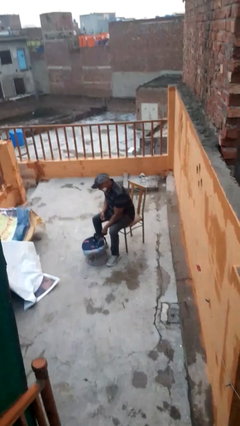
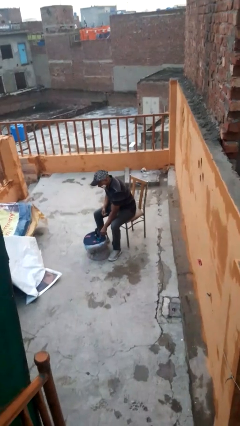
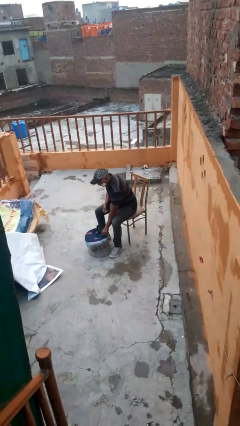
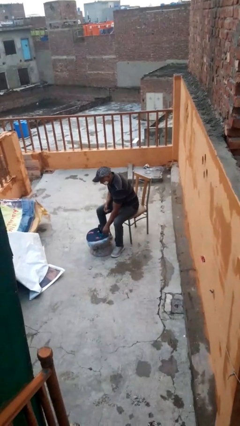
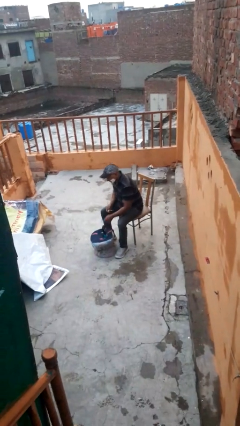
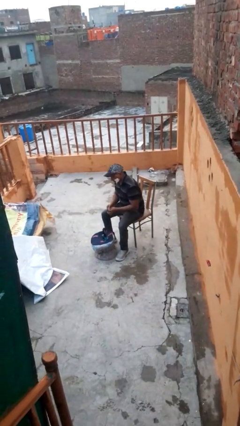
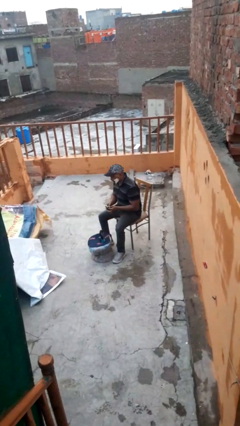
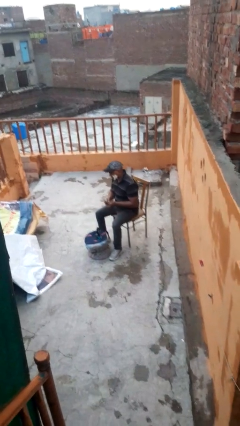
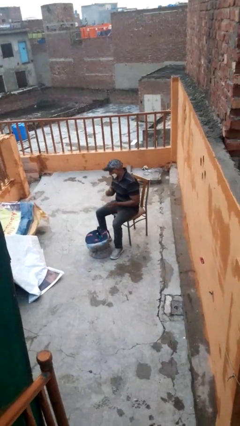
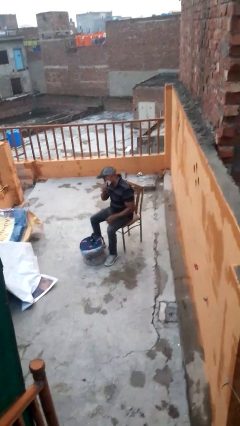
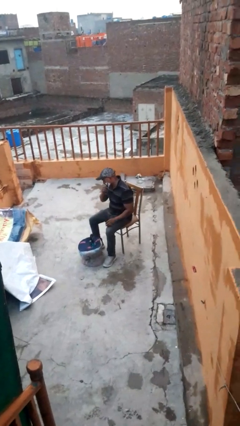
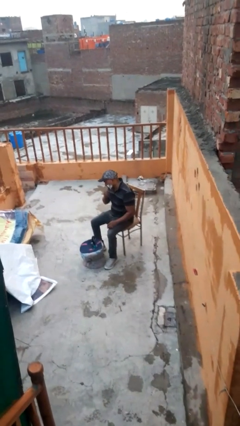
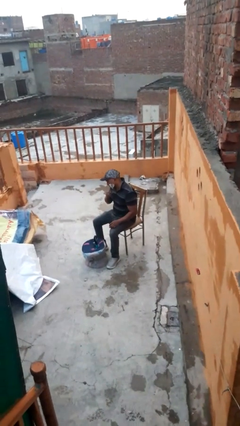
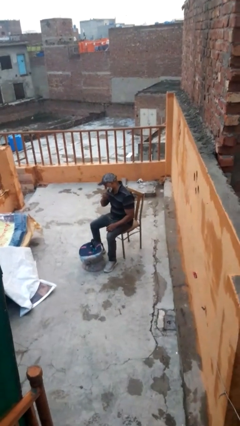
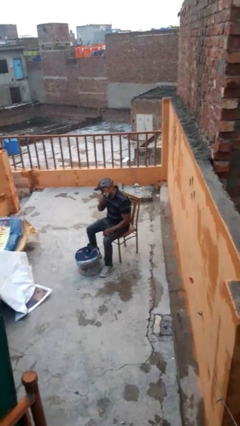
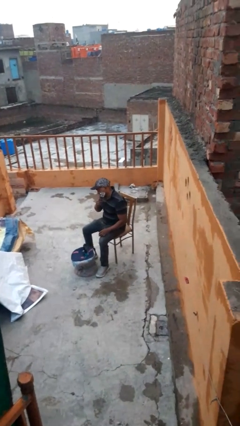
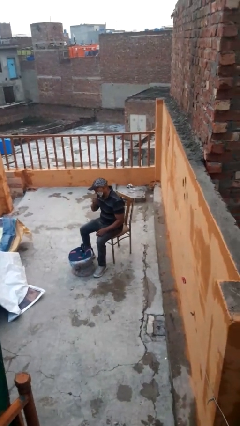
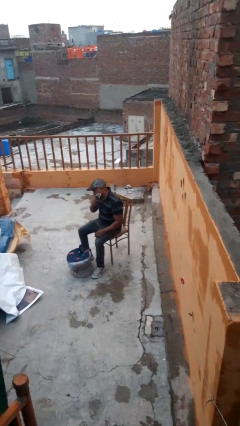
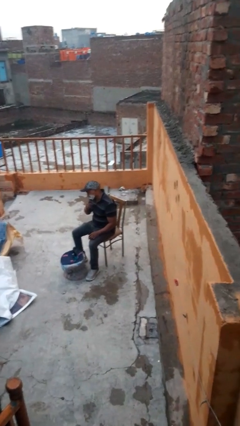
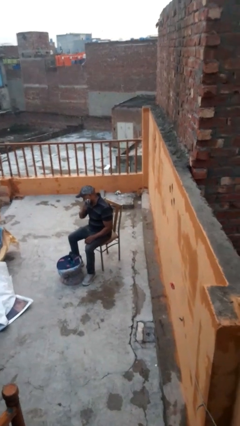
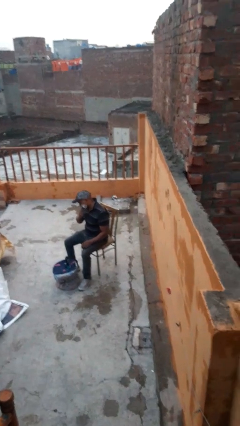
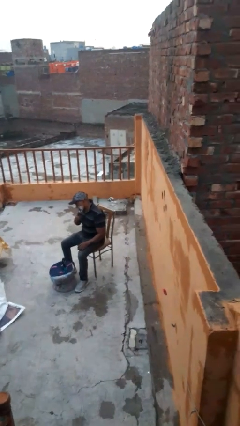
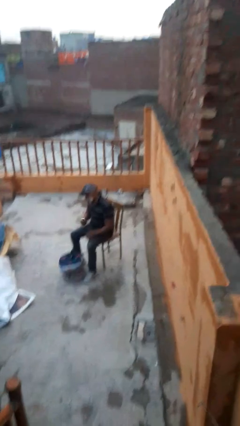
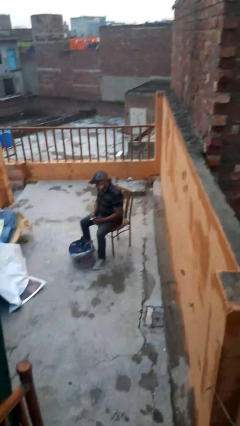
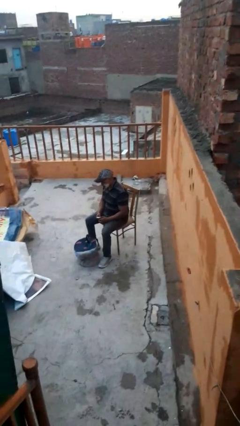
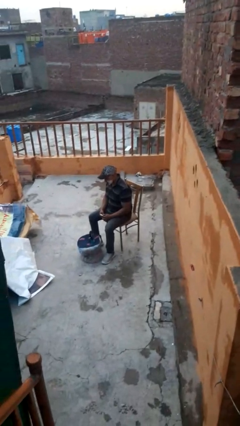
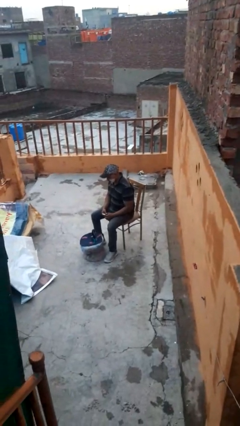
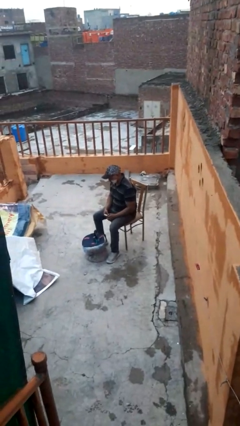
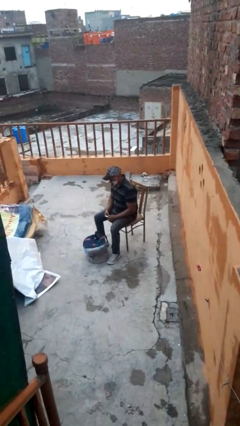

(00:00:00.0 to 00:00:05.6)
person shaves face

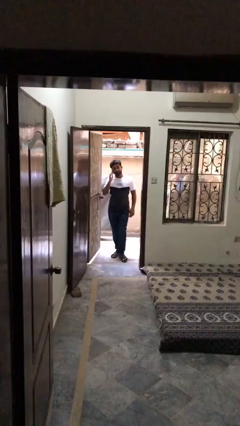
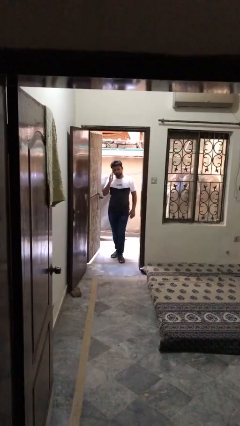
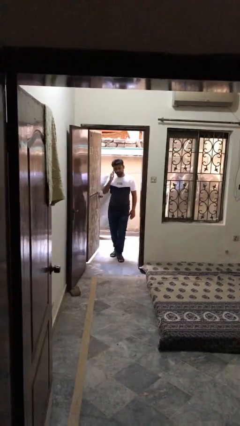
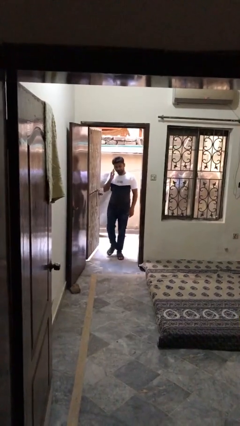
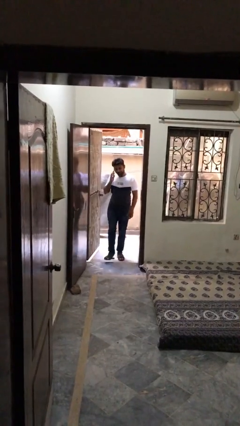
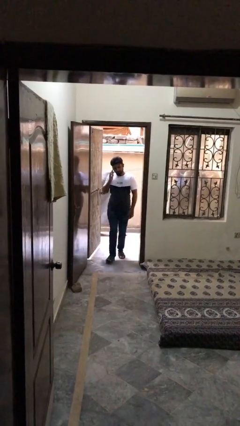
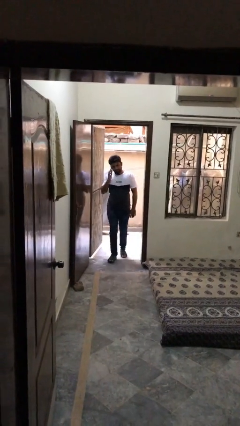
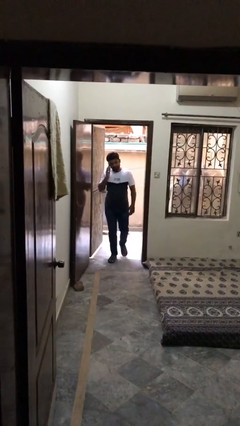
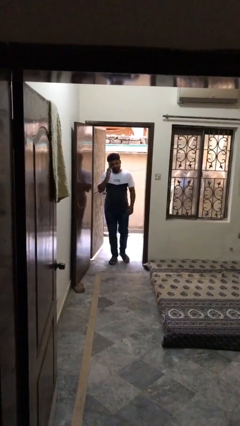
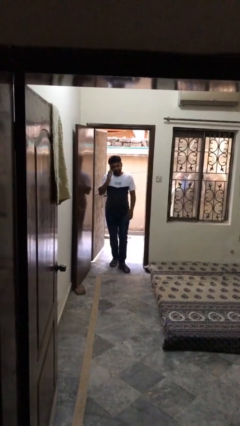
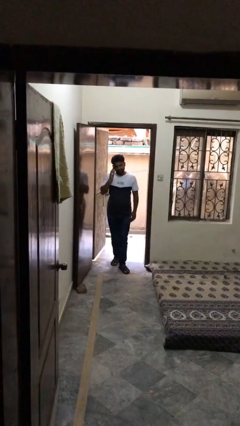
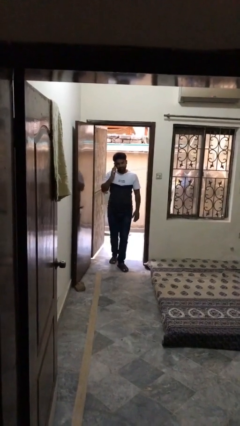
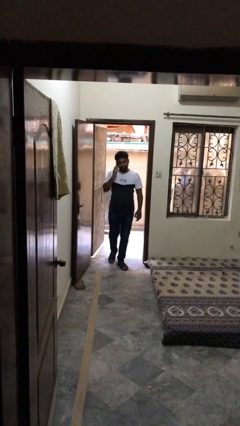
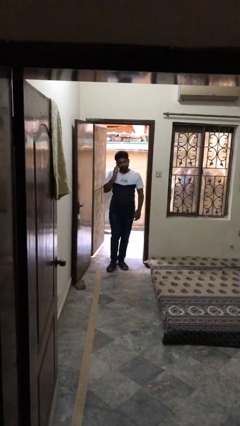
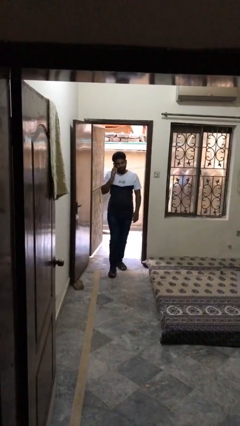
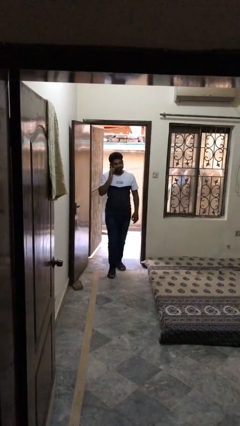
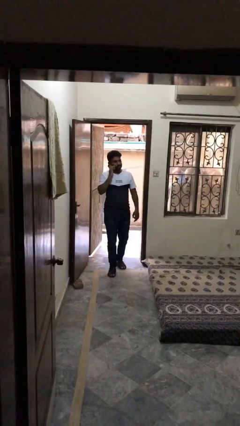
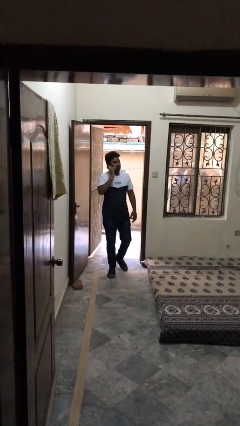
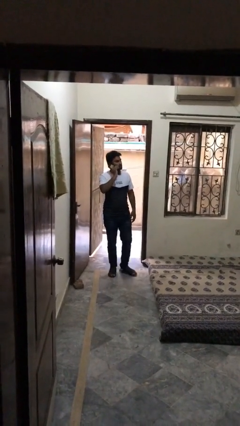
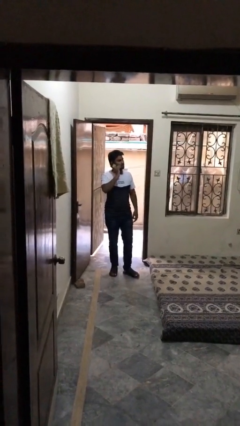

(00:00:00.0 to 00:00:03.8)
person enters scene through structure

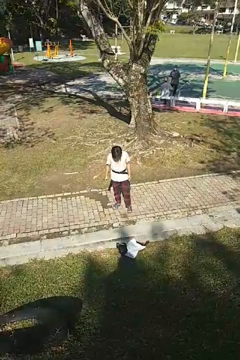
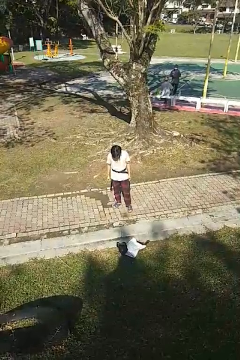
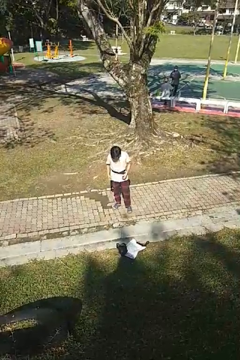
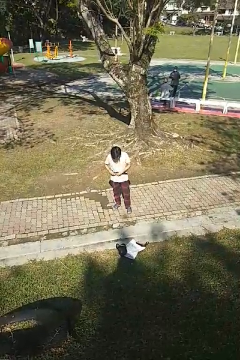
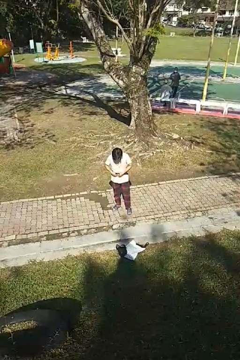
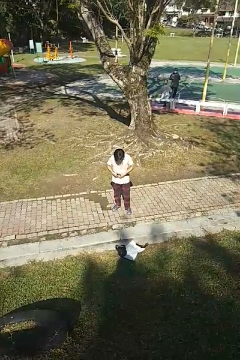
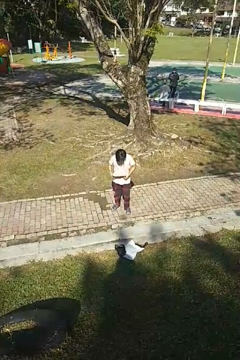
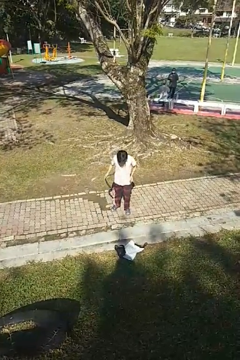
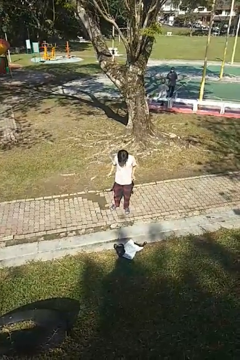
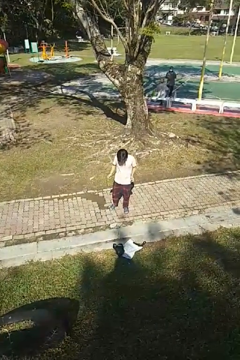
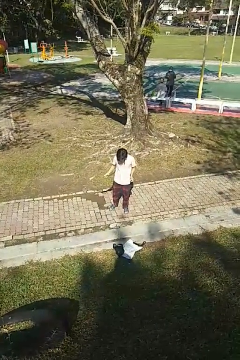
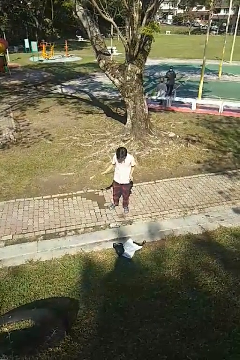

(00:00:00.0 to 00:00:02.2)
person takes off belt

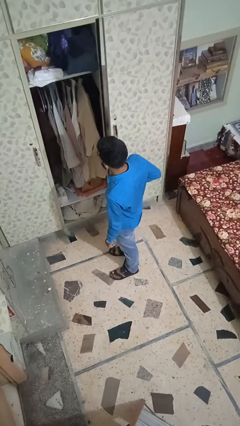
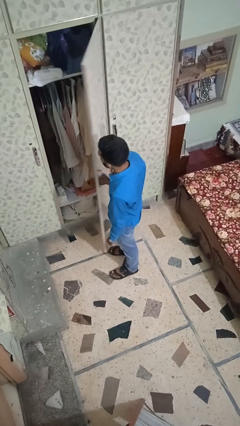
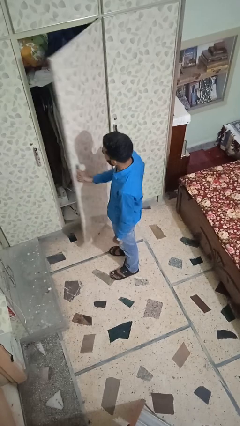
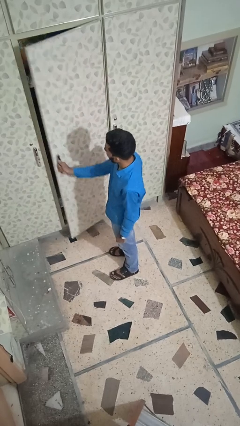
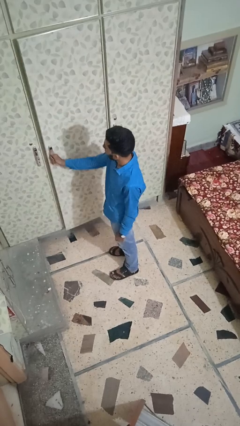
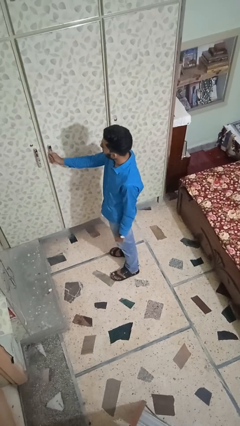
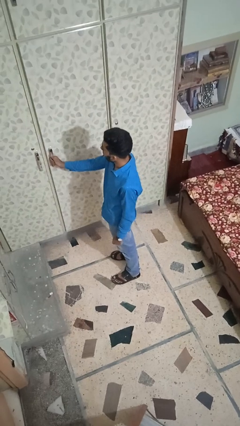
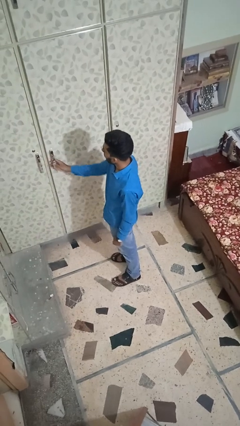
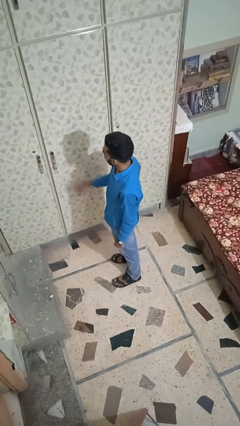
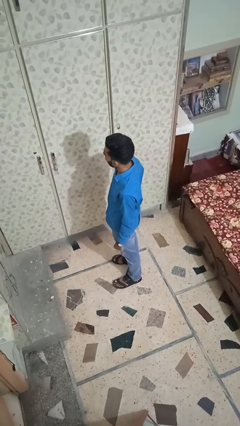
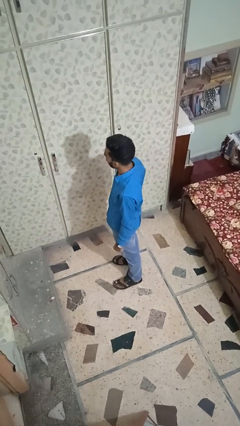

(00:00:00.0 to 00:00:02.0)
person closes closet door

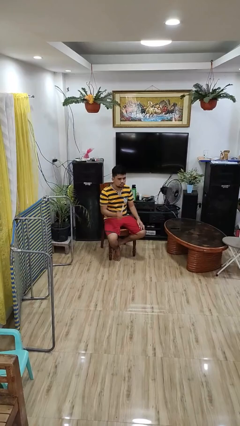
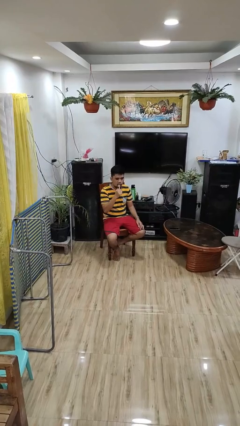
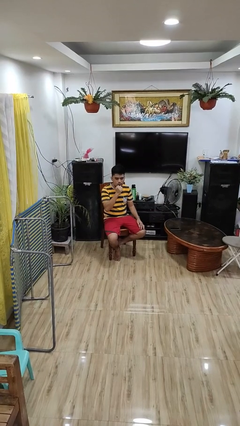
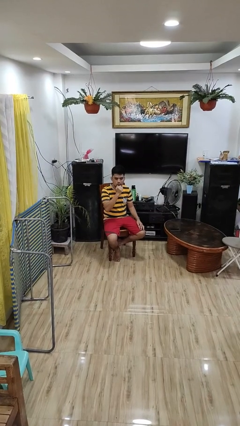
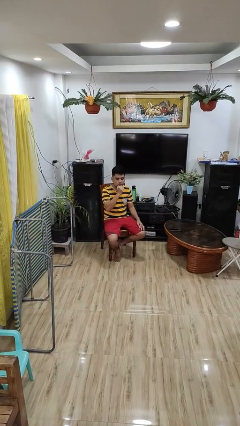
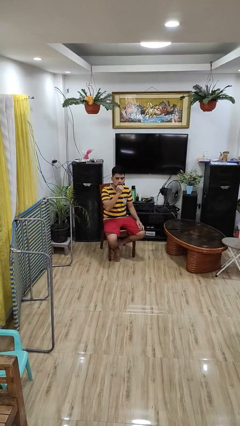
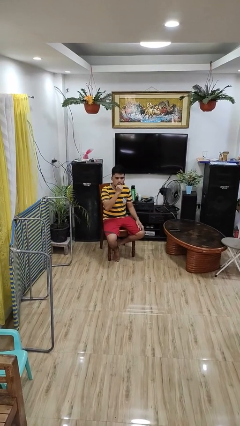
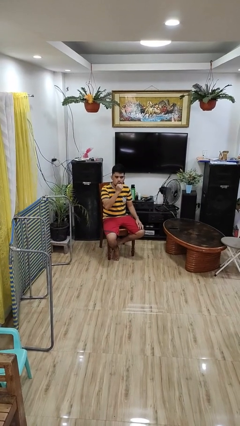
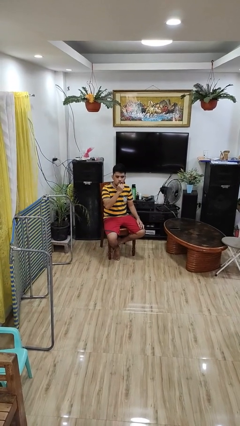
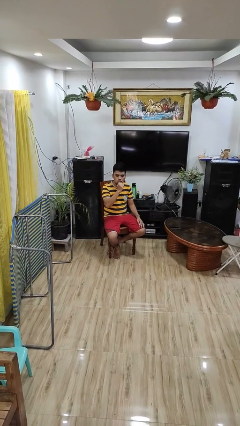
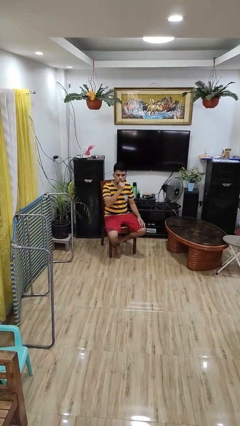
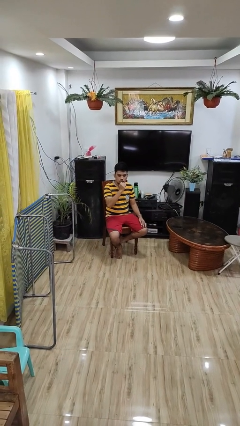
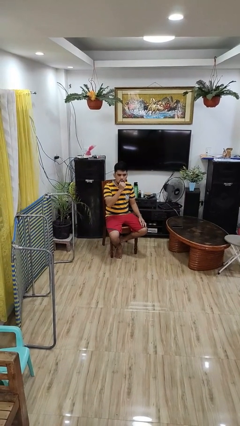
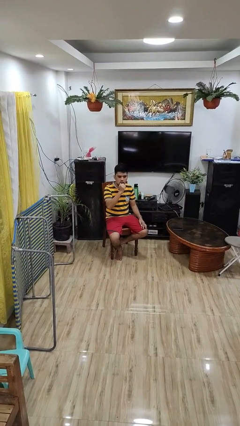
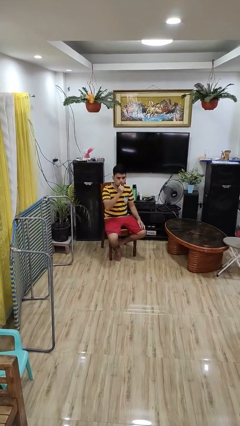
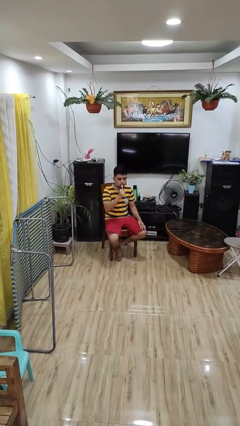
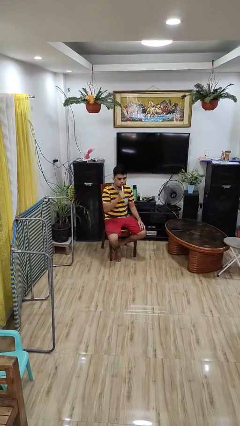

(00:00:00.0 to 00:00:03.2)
person brushes teeth

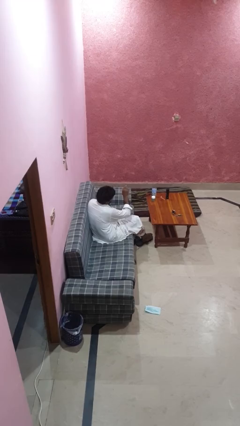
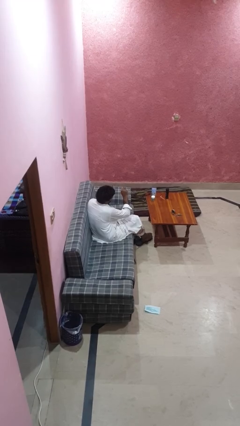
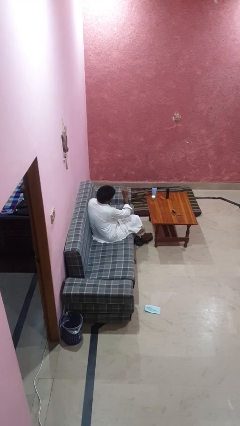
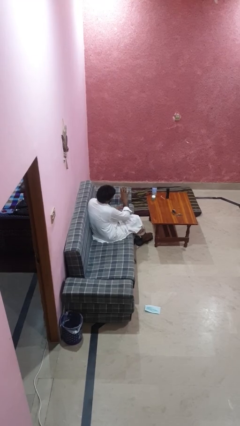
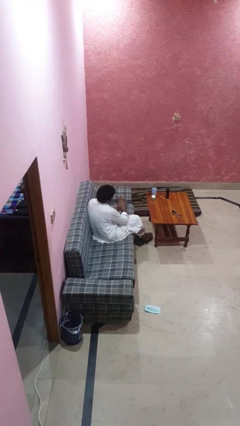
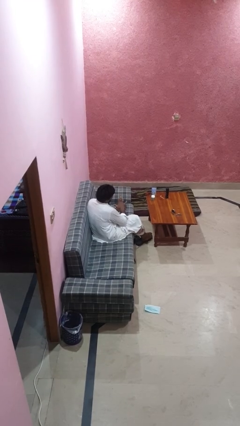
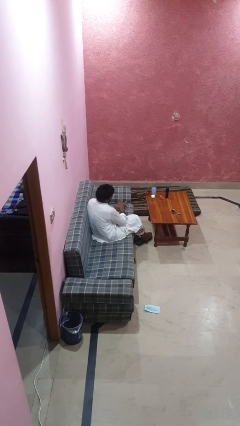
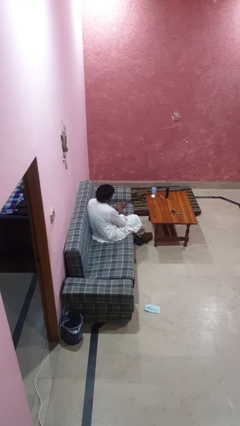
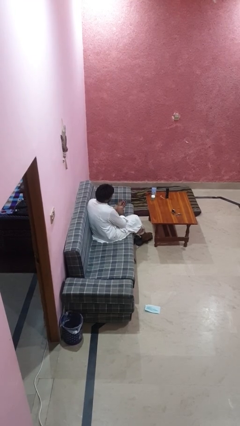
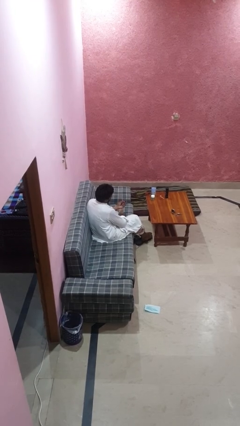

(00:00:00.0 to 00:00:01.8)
person takes off ring
